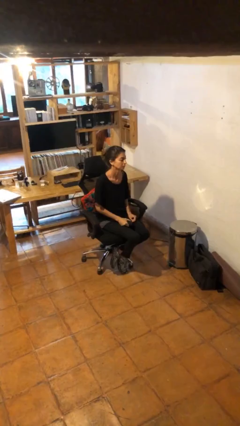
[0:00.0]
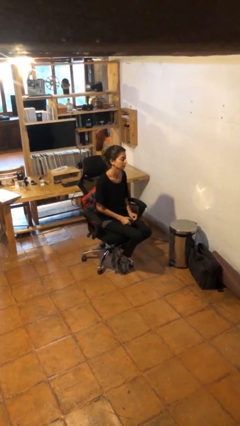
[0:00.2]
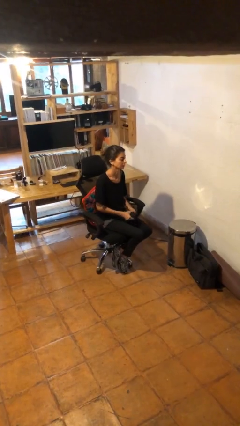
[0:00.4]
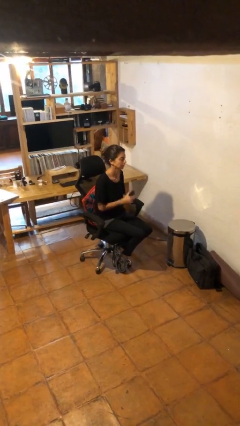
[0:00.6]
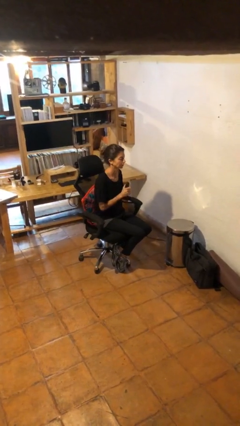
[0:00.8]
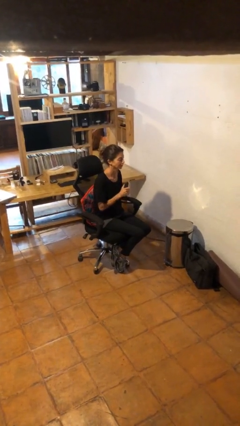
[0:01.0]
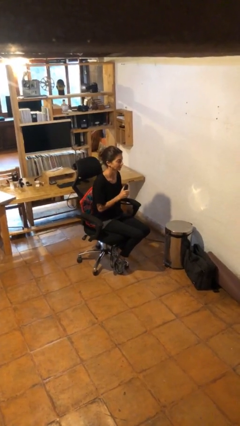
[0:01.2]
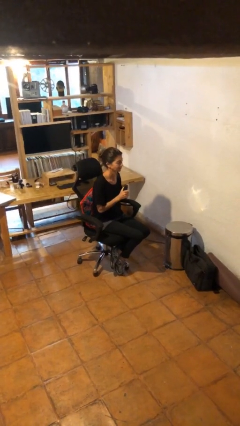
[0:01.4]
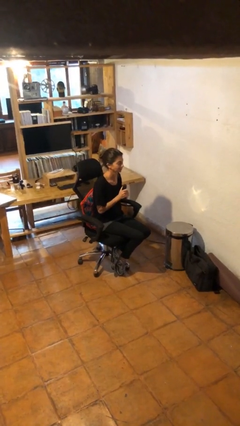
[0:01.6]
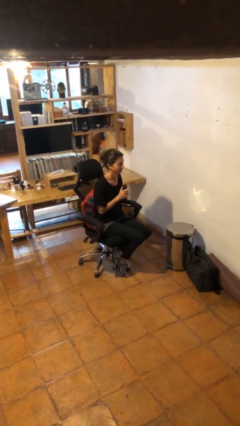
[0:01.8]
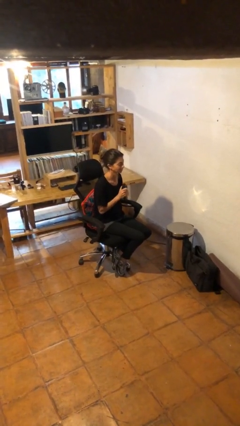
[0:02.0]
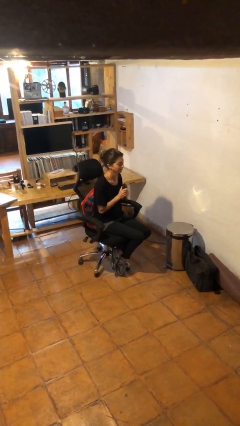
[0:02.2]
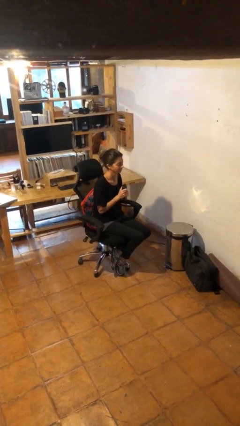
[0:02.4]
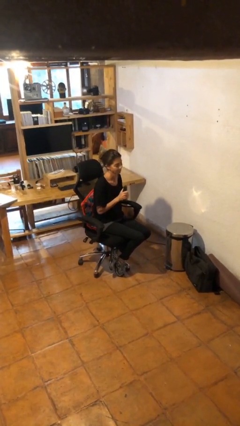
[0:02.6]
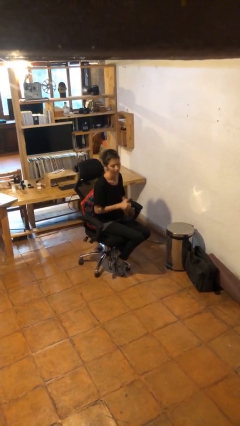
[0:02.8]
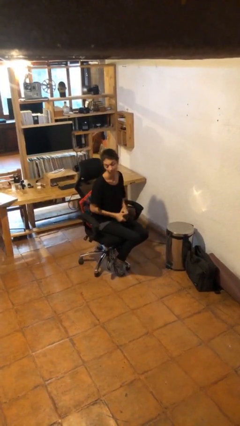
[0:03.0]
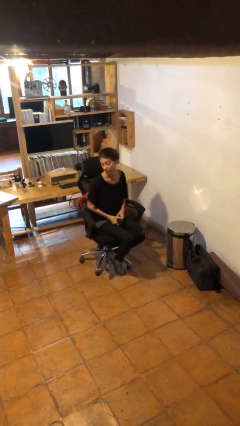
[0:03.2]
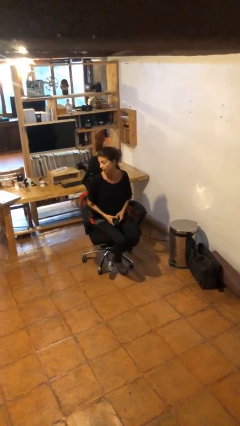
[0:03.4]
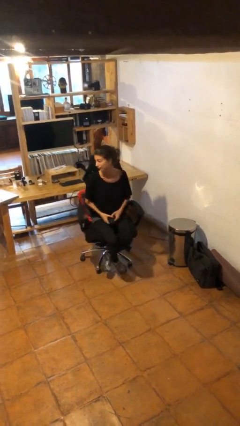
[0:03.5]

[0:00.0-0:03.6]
person squeezes object

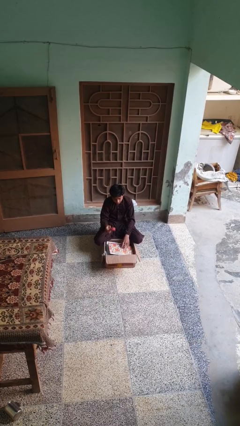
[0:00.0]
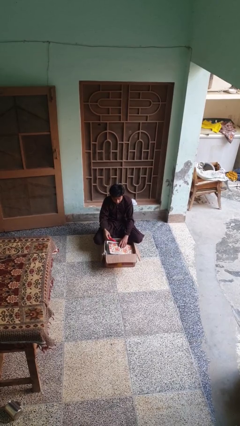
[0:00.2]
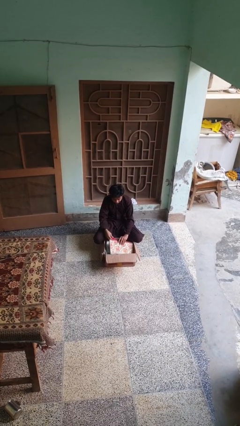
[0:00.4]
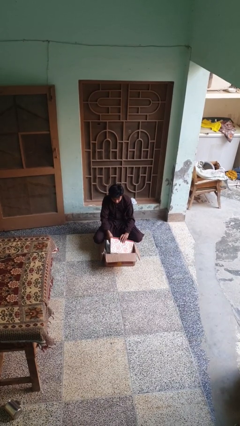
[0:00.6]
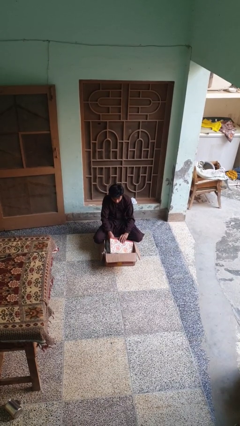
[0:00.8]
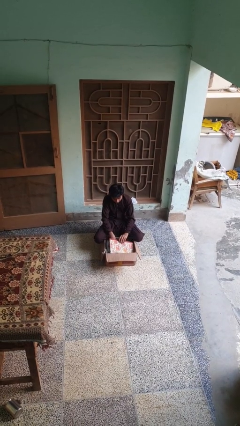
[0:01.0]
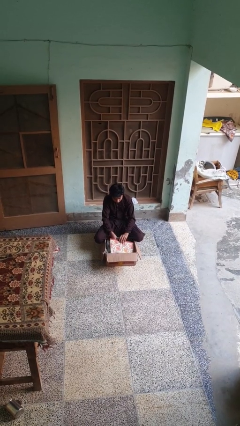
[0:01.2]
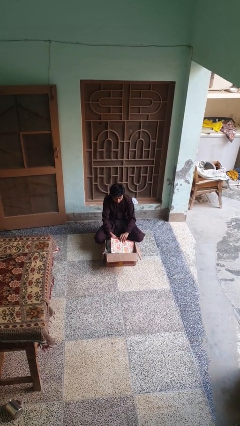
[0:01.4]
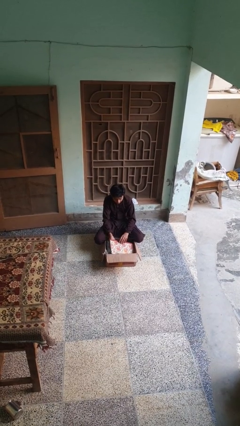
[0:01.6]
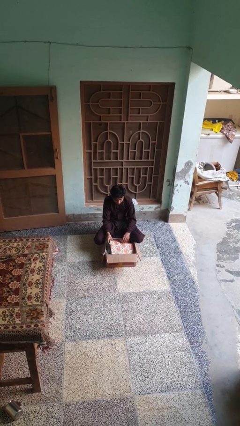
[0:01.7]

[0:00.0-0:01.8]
person puts object into box

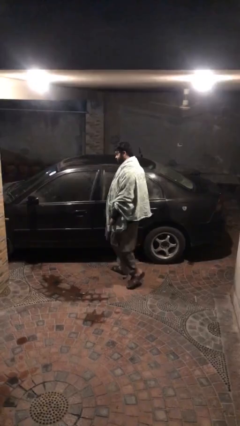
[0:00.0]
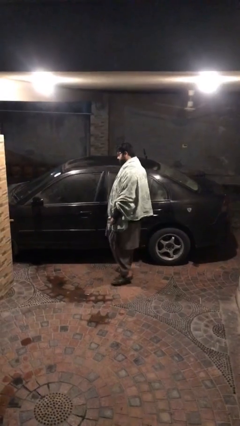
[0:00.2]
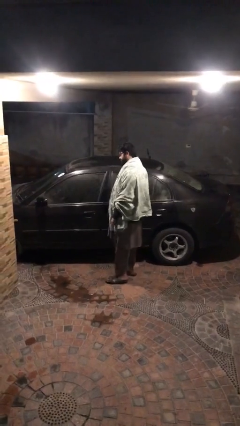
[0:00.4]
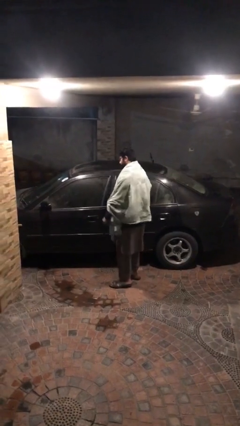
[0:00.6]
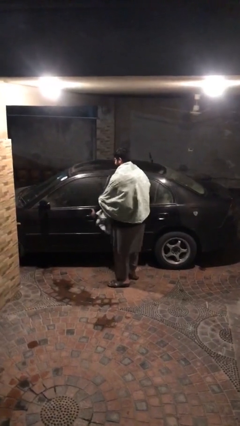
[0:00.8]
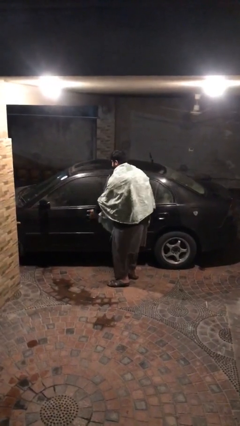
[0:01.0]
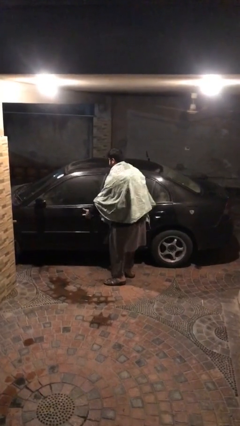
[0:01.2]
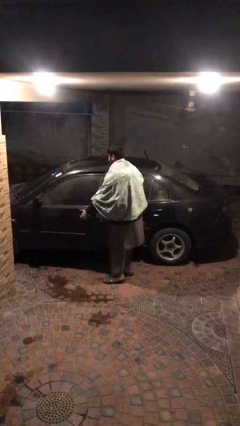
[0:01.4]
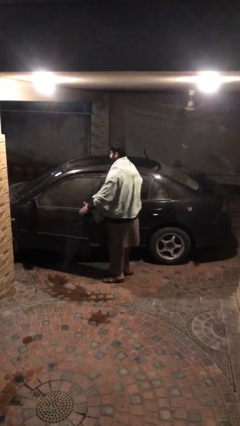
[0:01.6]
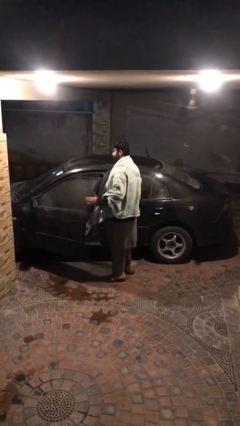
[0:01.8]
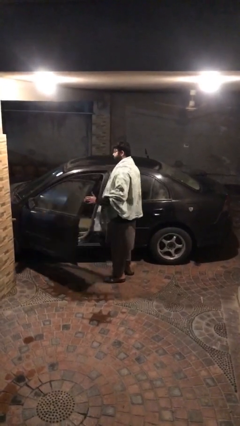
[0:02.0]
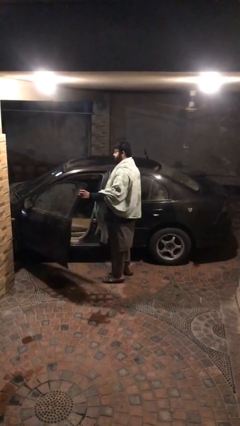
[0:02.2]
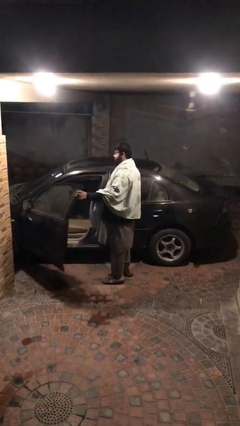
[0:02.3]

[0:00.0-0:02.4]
person opens car door

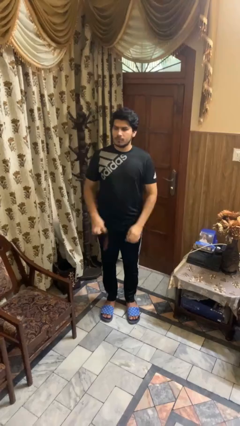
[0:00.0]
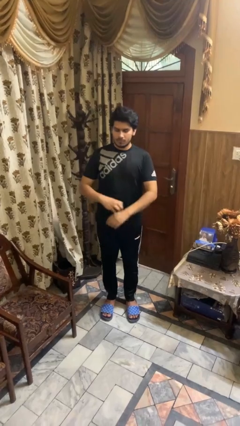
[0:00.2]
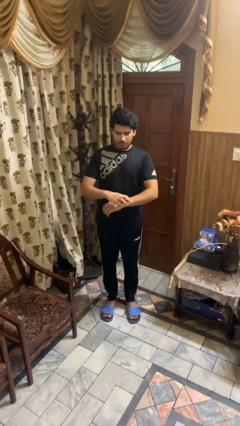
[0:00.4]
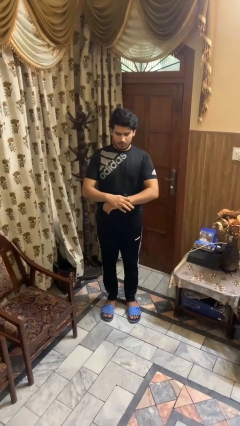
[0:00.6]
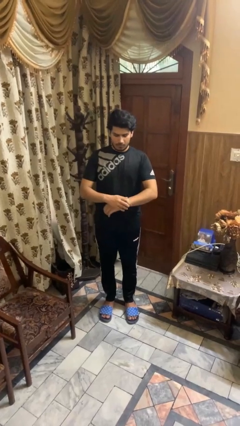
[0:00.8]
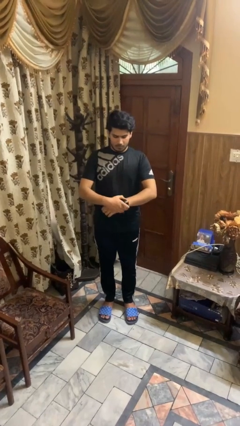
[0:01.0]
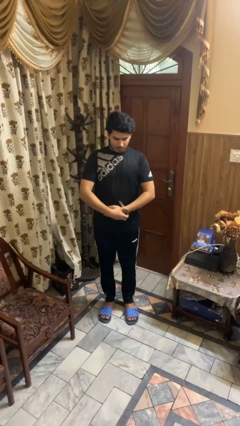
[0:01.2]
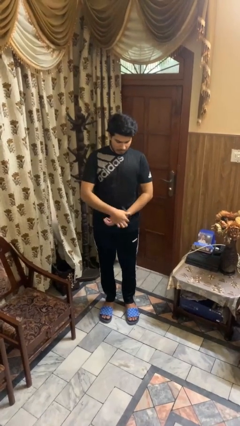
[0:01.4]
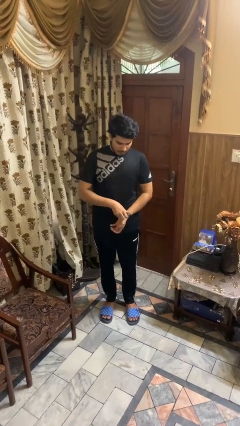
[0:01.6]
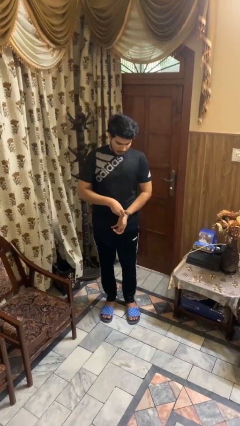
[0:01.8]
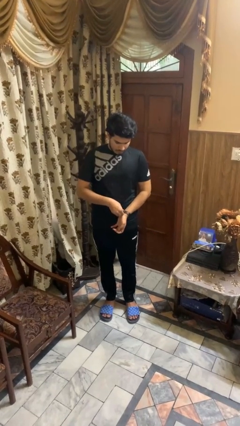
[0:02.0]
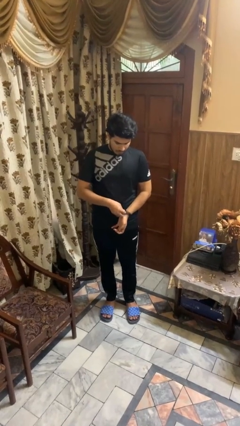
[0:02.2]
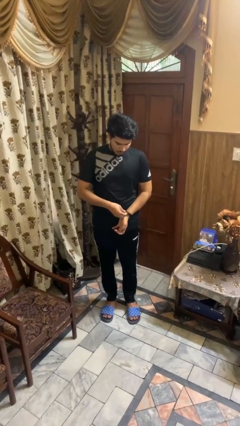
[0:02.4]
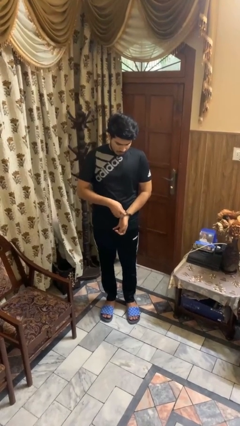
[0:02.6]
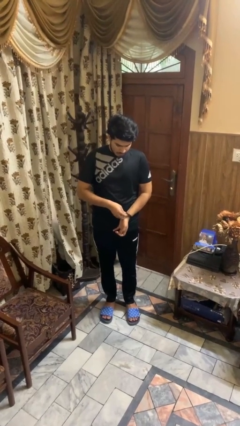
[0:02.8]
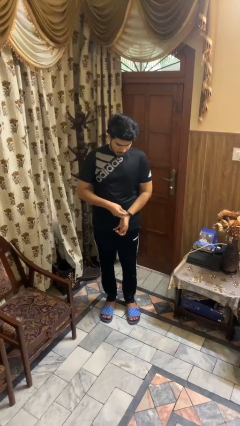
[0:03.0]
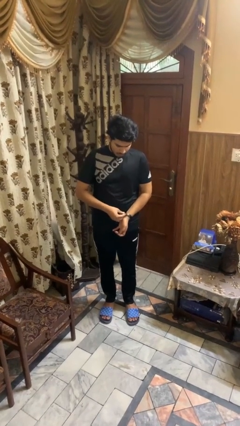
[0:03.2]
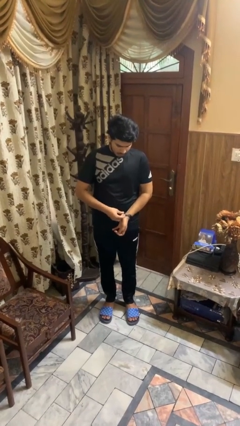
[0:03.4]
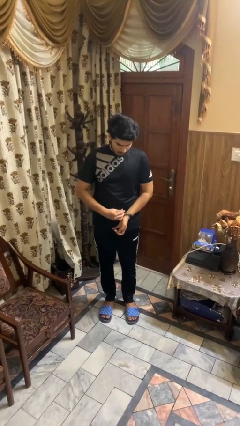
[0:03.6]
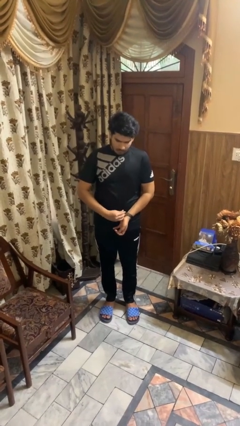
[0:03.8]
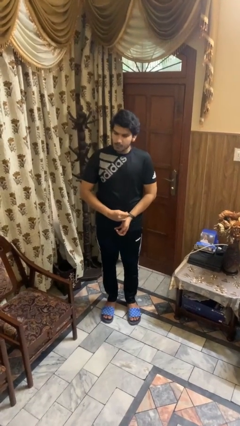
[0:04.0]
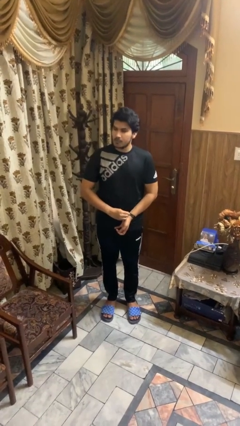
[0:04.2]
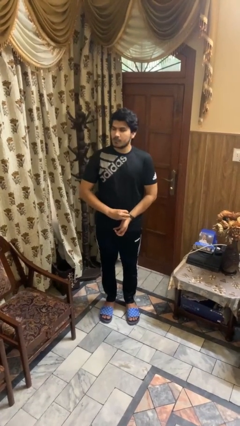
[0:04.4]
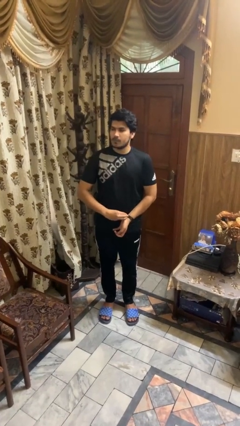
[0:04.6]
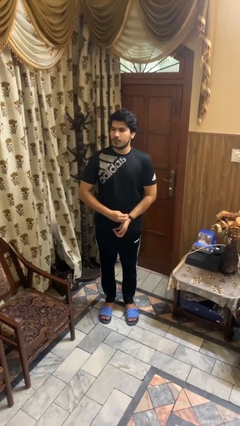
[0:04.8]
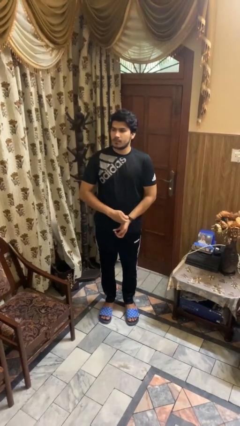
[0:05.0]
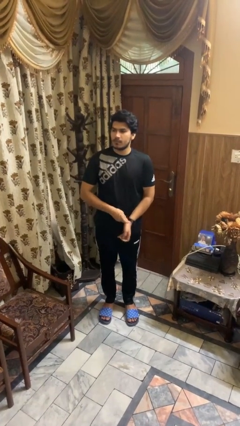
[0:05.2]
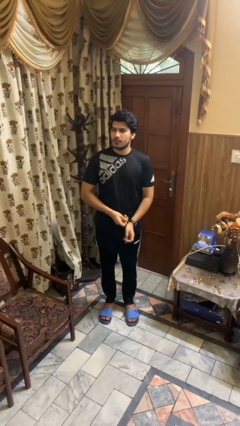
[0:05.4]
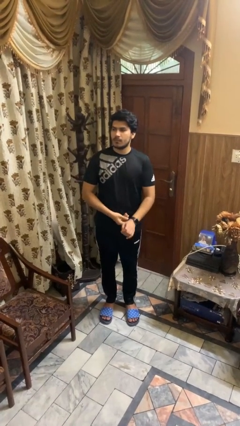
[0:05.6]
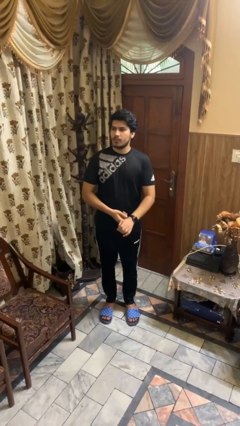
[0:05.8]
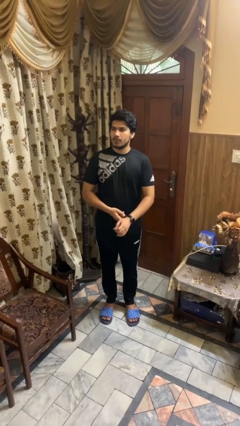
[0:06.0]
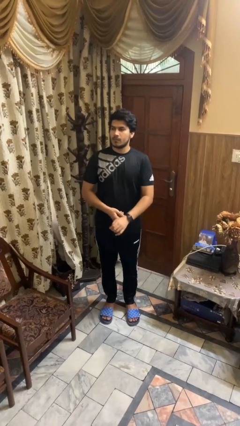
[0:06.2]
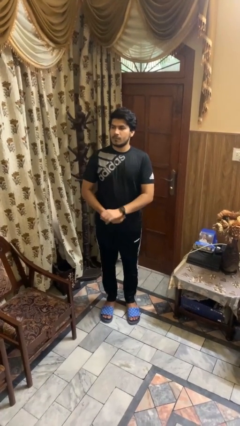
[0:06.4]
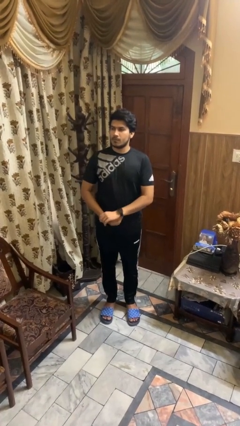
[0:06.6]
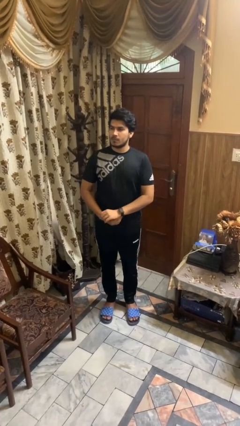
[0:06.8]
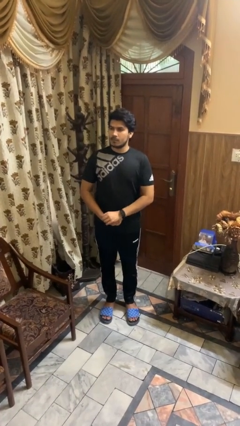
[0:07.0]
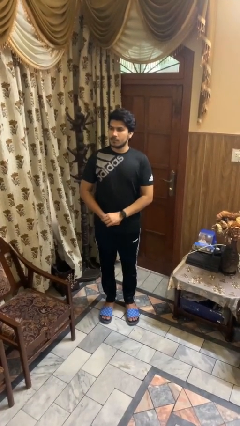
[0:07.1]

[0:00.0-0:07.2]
person puts on wristwatch

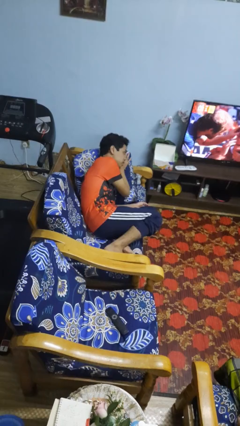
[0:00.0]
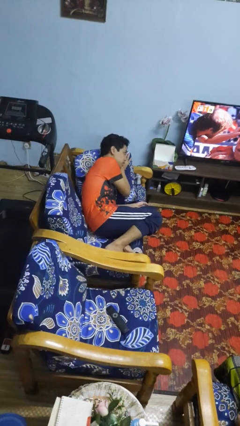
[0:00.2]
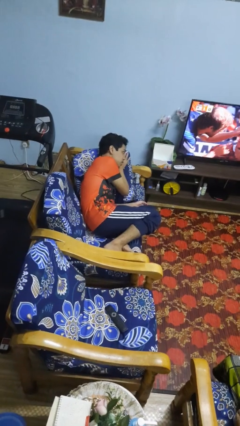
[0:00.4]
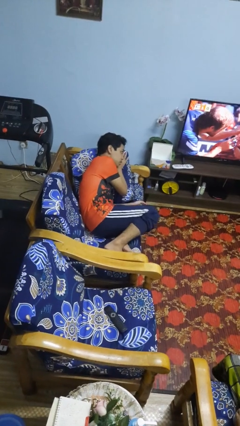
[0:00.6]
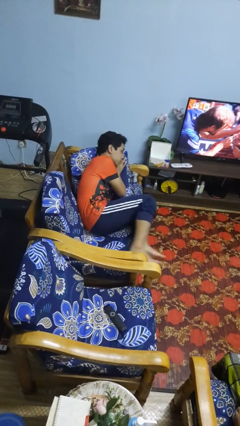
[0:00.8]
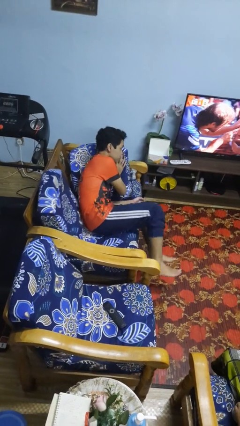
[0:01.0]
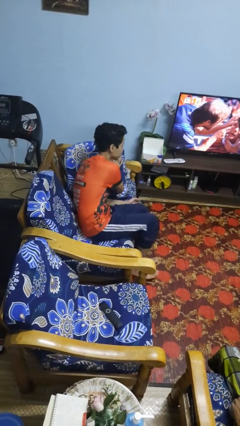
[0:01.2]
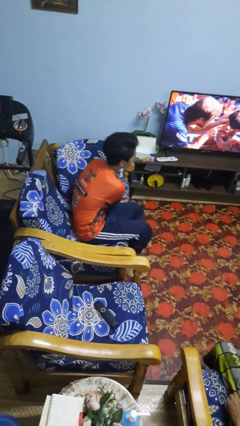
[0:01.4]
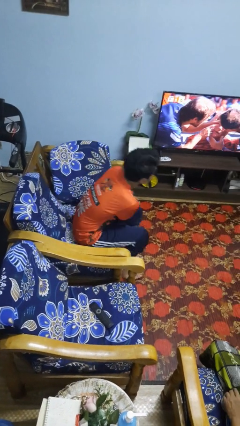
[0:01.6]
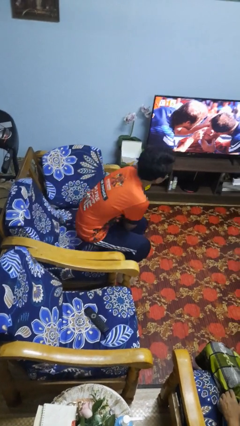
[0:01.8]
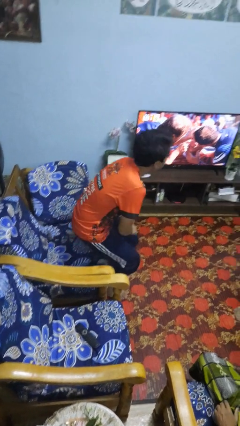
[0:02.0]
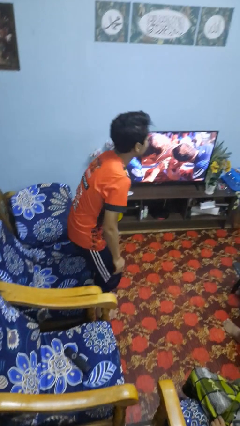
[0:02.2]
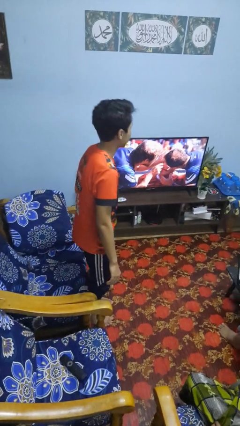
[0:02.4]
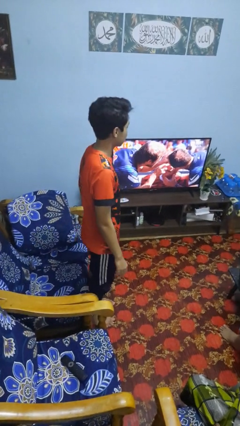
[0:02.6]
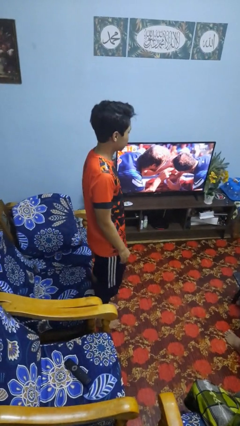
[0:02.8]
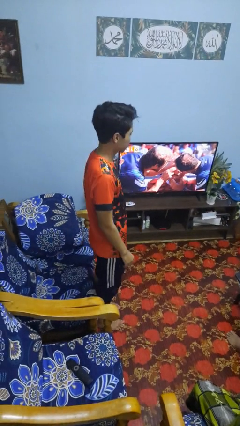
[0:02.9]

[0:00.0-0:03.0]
person stands up
